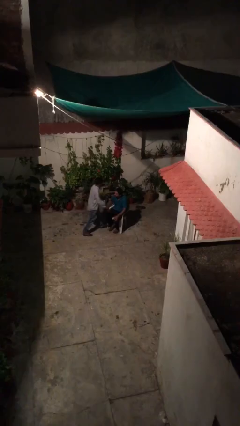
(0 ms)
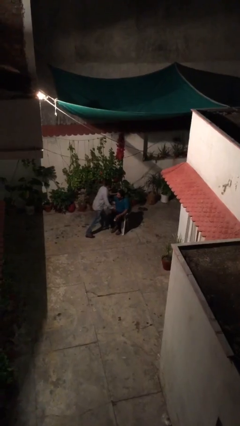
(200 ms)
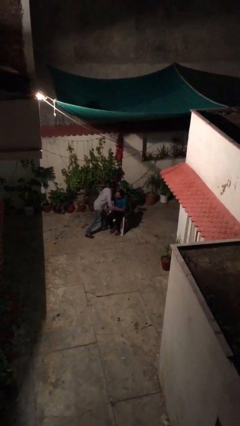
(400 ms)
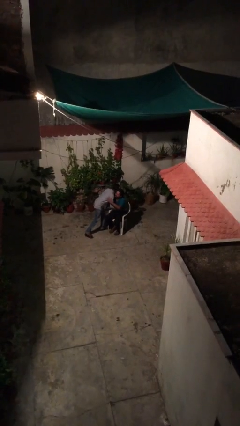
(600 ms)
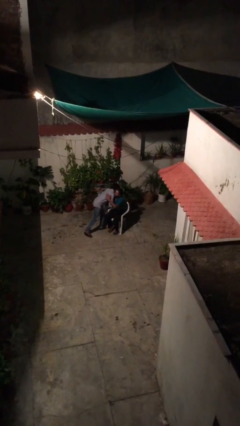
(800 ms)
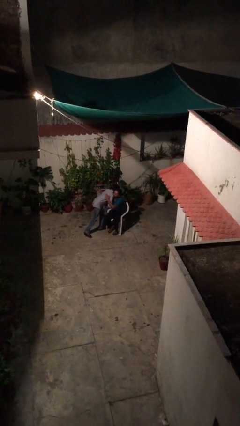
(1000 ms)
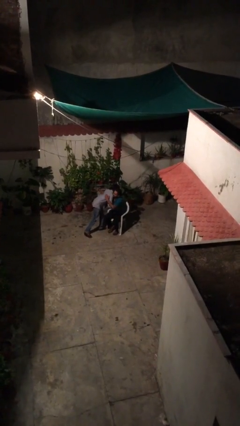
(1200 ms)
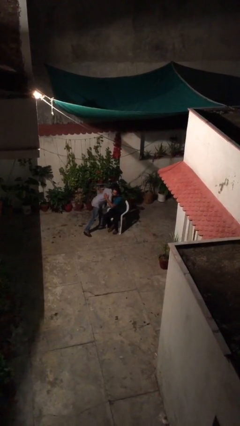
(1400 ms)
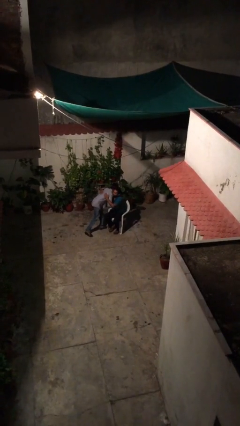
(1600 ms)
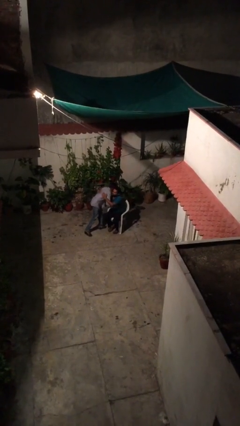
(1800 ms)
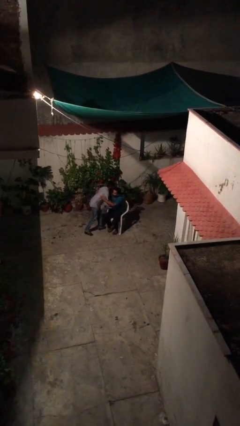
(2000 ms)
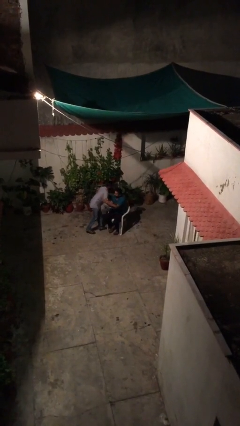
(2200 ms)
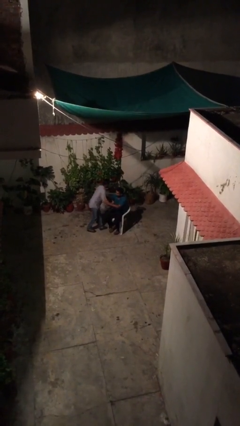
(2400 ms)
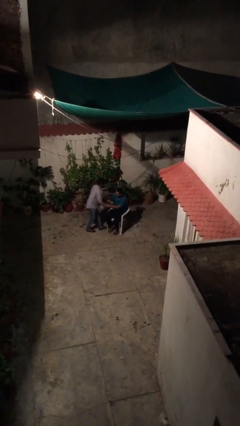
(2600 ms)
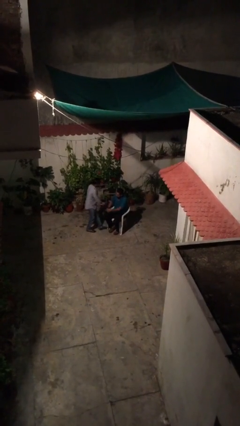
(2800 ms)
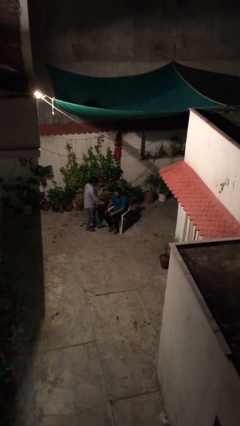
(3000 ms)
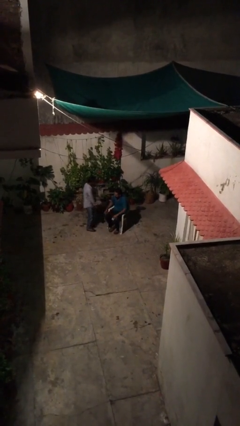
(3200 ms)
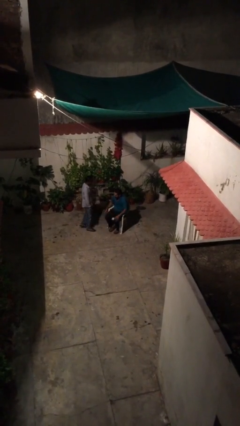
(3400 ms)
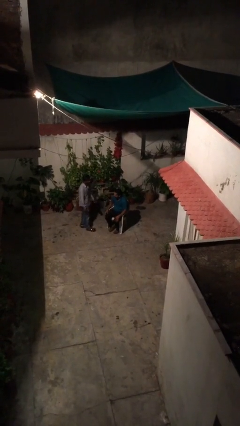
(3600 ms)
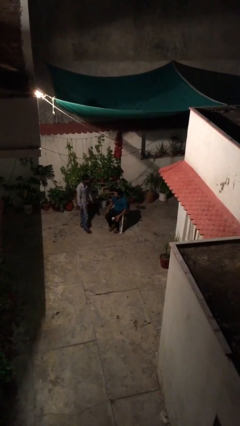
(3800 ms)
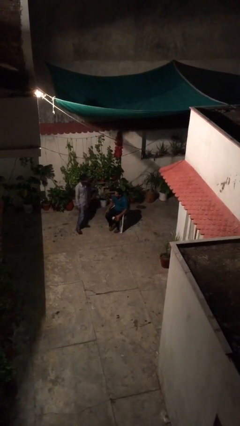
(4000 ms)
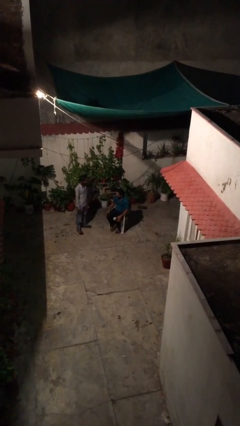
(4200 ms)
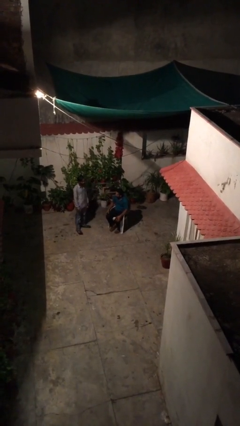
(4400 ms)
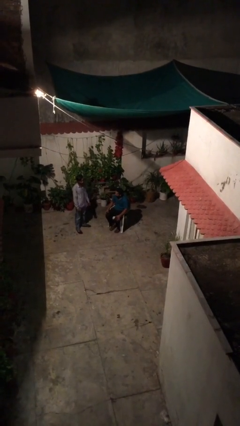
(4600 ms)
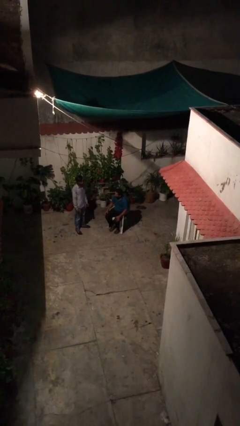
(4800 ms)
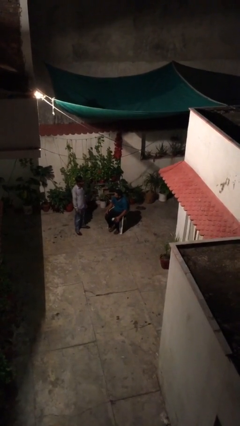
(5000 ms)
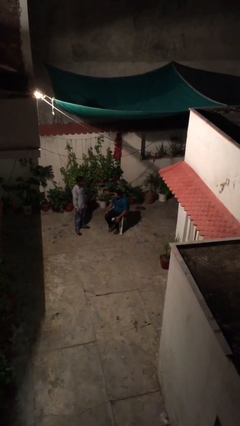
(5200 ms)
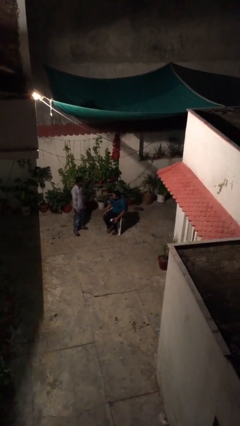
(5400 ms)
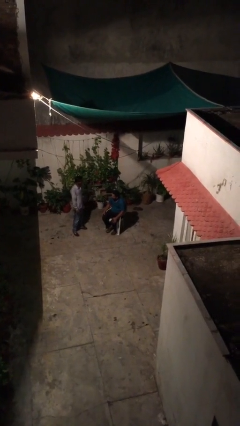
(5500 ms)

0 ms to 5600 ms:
person embraces person

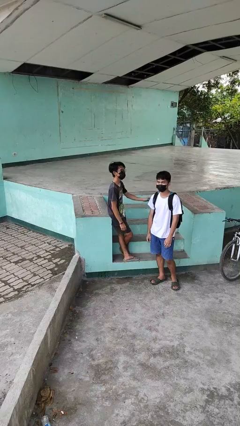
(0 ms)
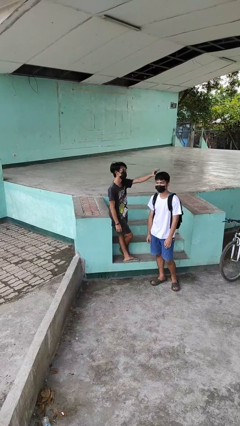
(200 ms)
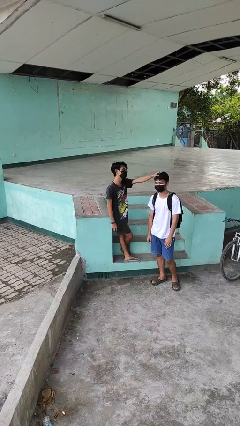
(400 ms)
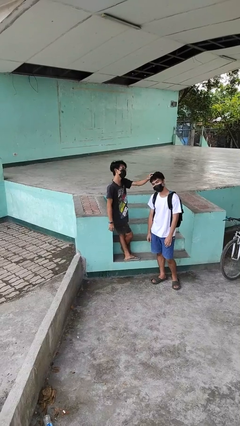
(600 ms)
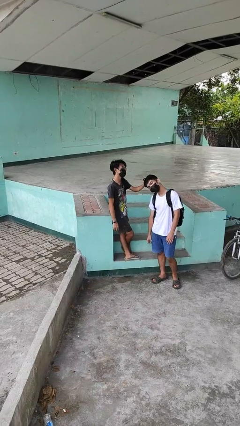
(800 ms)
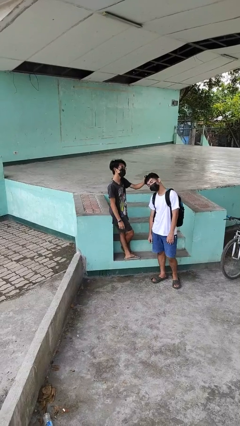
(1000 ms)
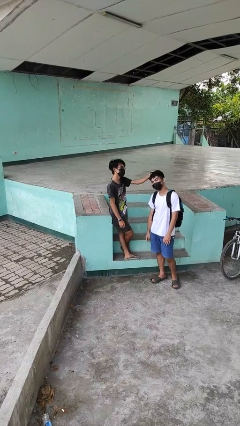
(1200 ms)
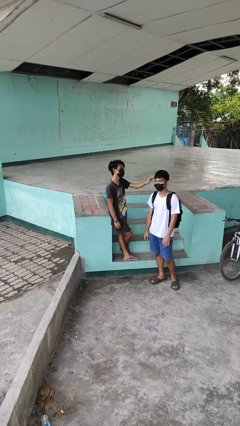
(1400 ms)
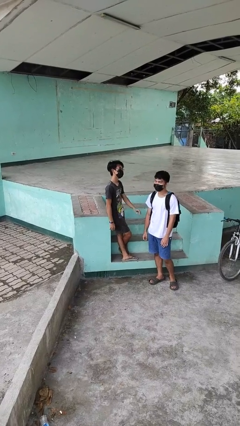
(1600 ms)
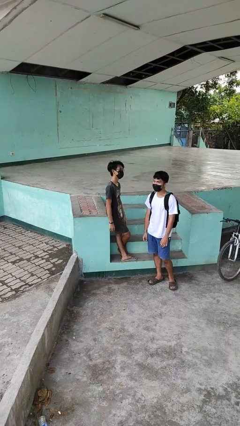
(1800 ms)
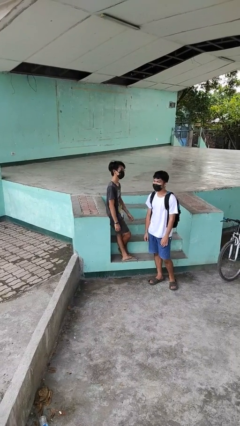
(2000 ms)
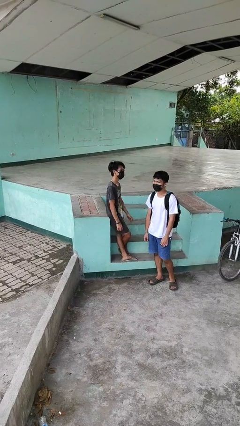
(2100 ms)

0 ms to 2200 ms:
person grabs person by hair

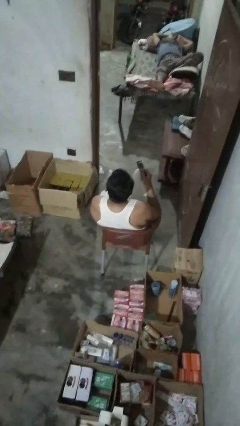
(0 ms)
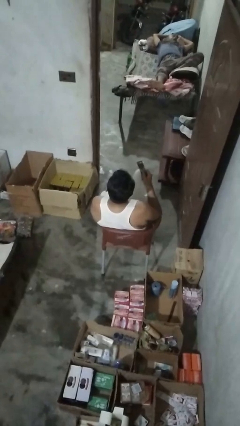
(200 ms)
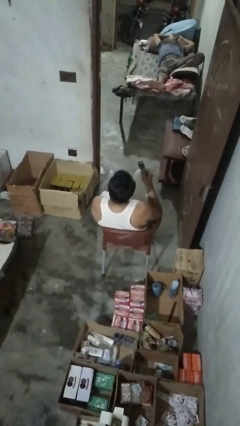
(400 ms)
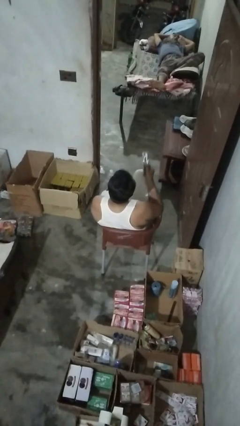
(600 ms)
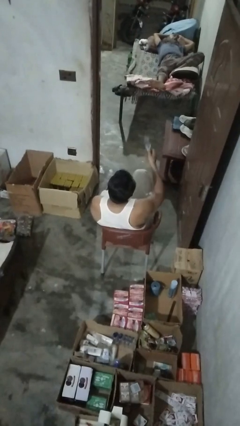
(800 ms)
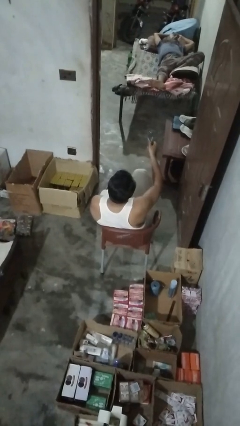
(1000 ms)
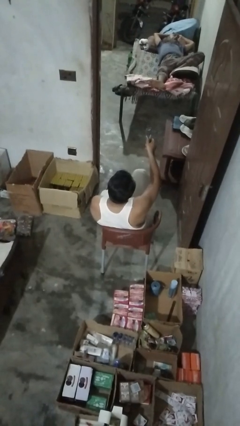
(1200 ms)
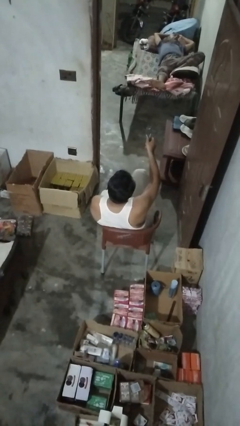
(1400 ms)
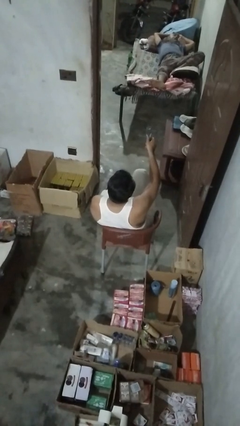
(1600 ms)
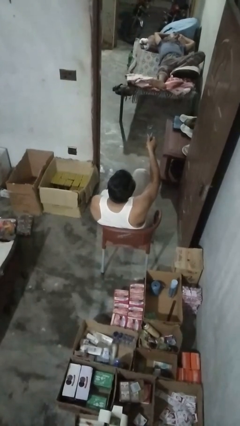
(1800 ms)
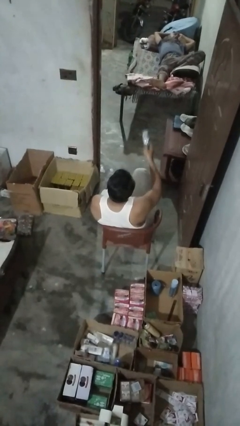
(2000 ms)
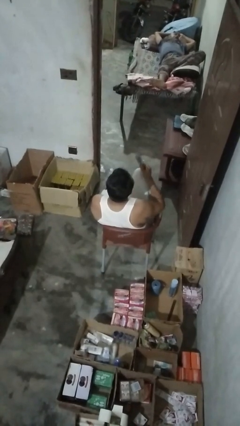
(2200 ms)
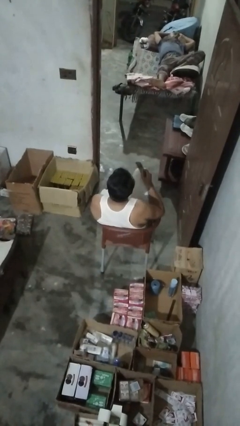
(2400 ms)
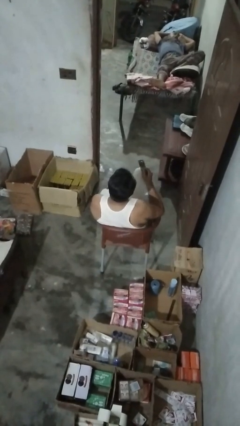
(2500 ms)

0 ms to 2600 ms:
person uses television remote

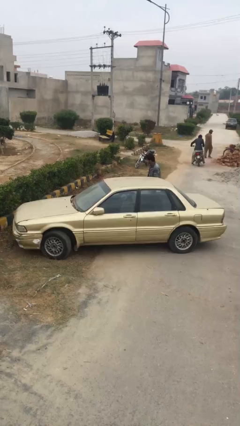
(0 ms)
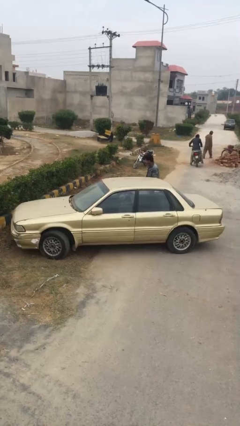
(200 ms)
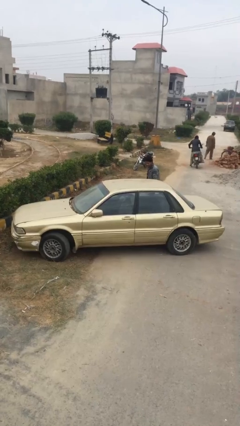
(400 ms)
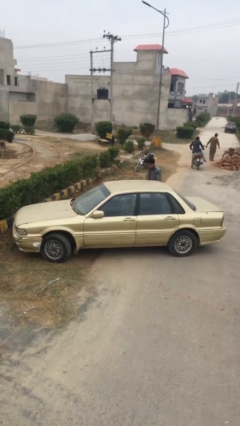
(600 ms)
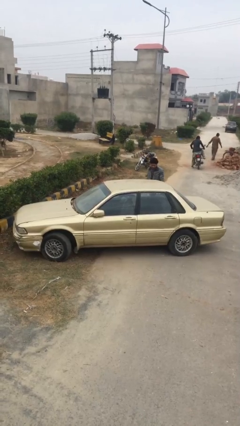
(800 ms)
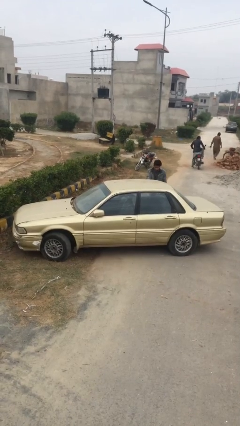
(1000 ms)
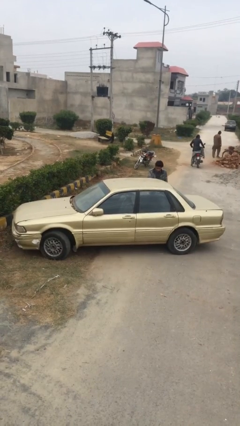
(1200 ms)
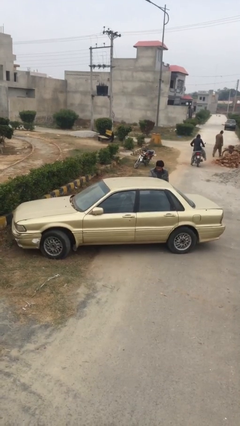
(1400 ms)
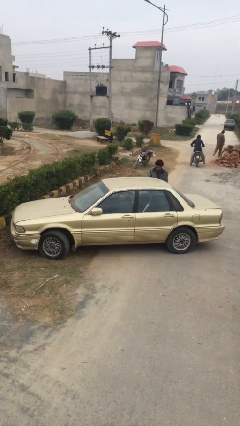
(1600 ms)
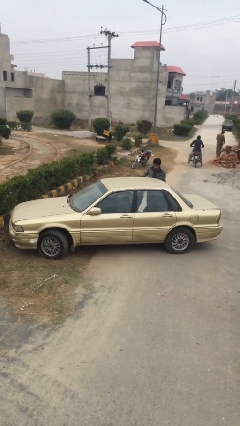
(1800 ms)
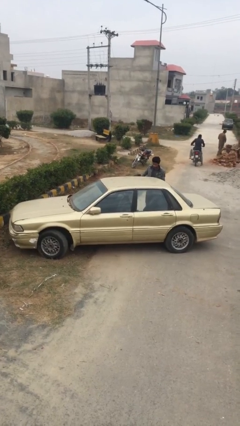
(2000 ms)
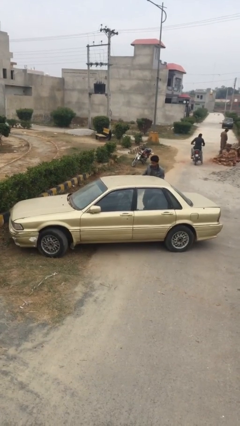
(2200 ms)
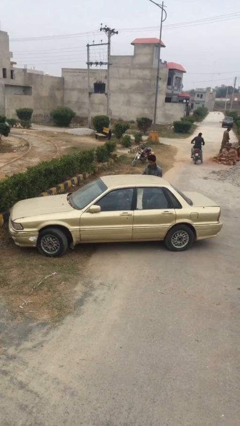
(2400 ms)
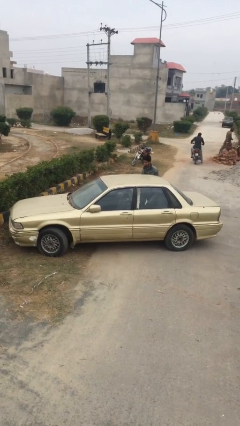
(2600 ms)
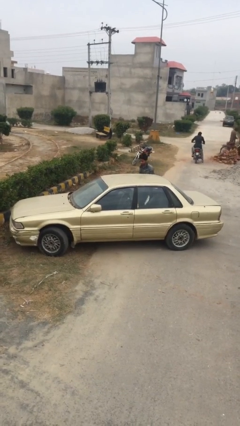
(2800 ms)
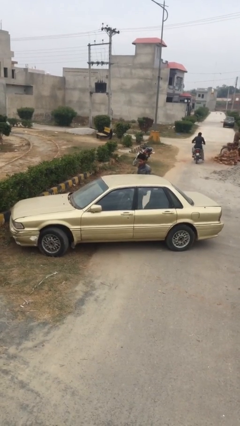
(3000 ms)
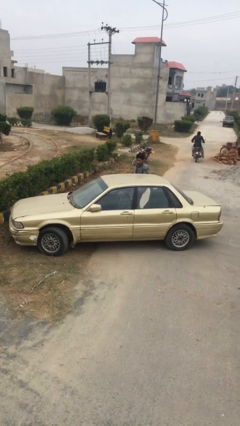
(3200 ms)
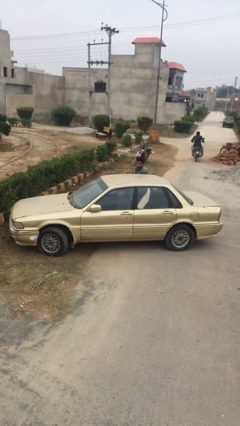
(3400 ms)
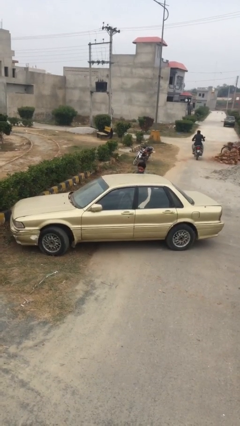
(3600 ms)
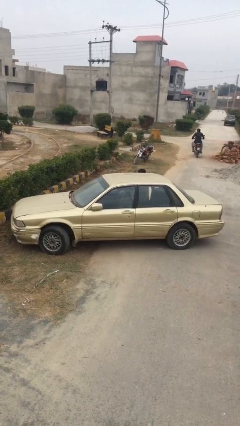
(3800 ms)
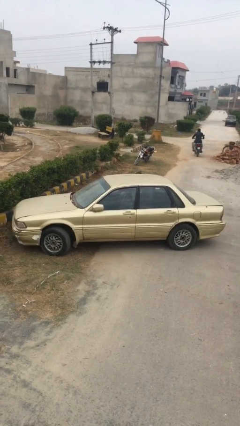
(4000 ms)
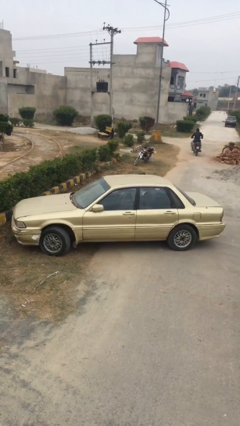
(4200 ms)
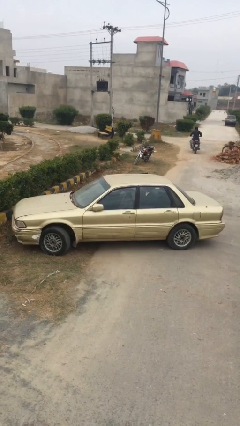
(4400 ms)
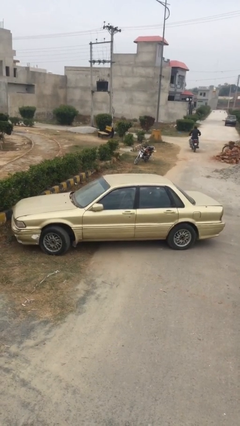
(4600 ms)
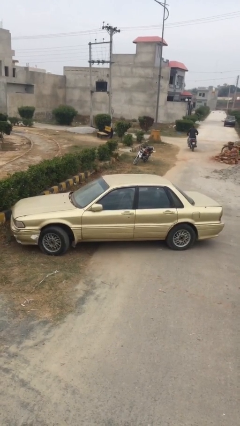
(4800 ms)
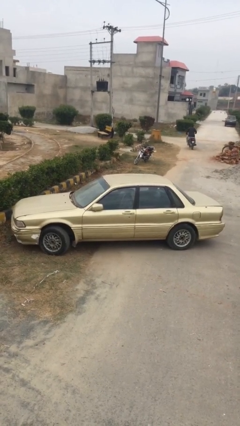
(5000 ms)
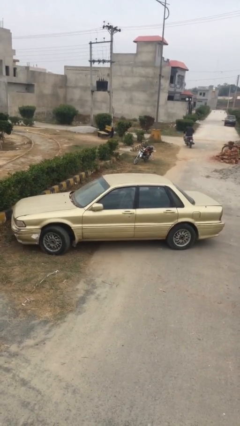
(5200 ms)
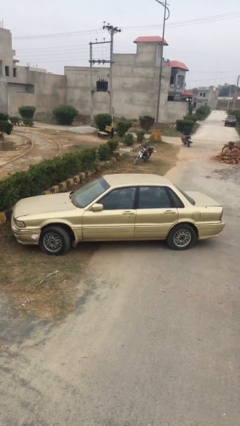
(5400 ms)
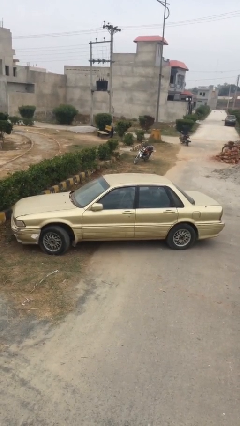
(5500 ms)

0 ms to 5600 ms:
car picks up person

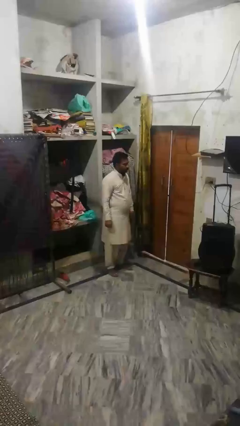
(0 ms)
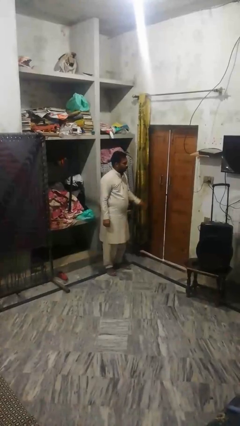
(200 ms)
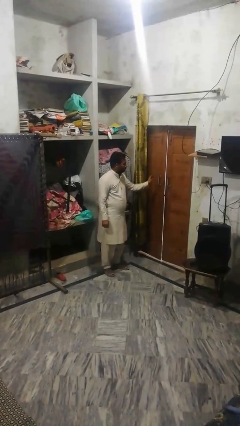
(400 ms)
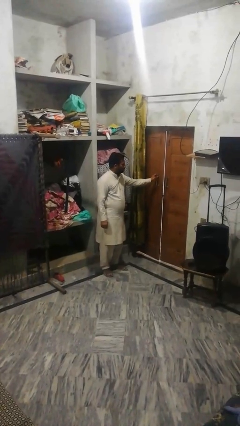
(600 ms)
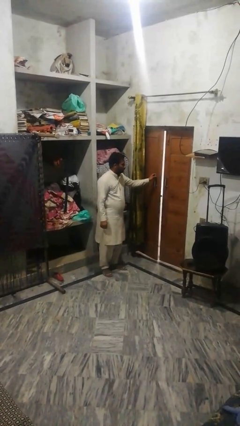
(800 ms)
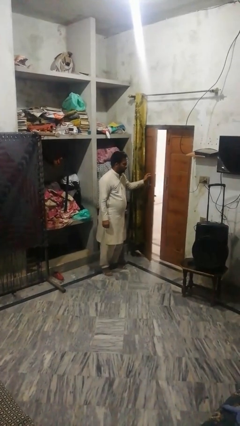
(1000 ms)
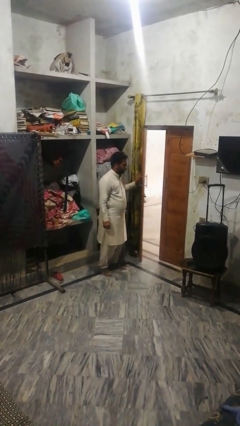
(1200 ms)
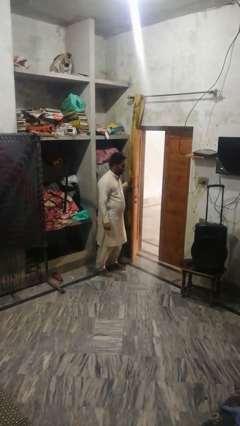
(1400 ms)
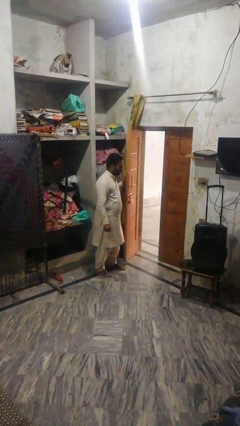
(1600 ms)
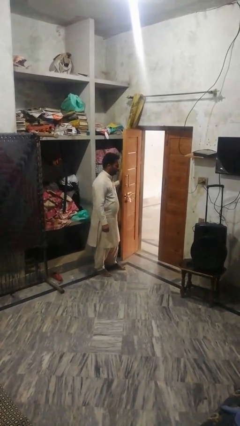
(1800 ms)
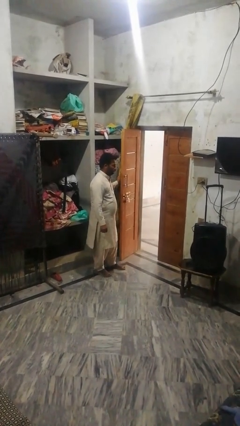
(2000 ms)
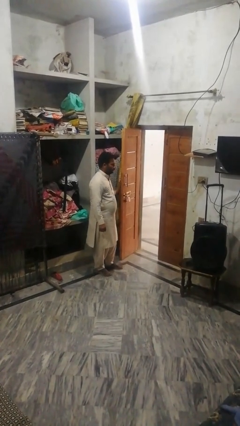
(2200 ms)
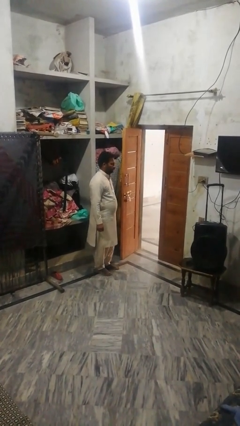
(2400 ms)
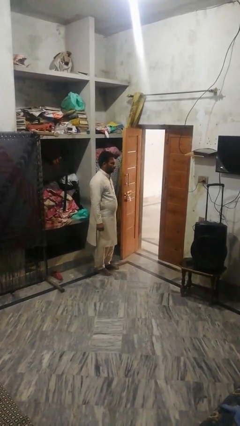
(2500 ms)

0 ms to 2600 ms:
person opens facility door
